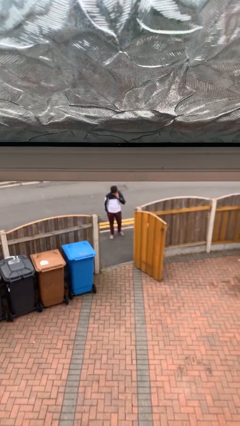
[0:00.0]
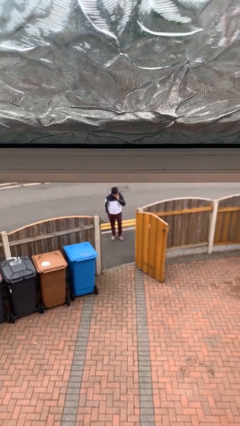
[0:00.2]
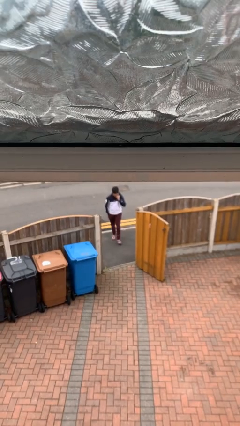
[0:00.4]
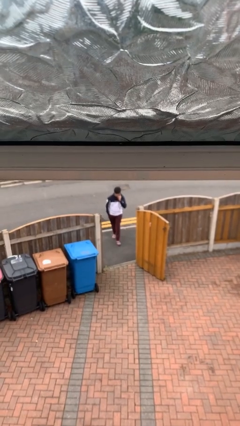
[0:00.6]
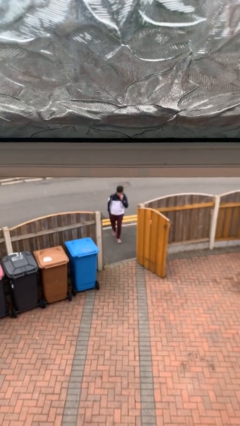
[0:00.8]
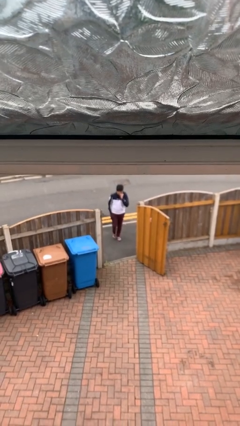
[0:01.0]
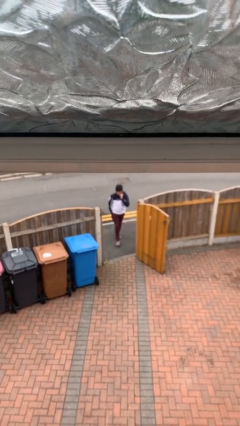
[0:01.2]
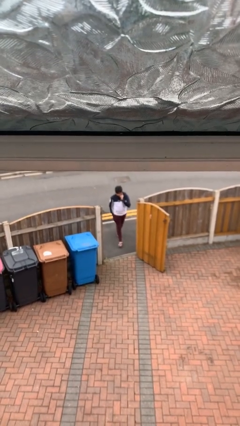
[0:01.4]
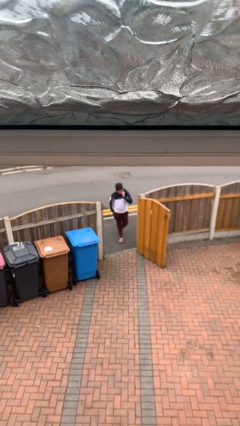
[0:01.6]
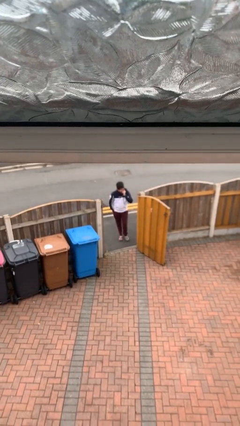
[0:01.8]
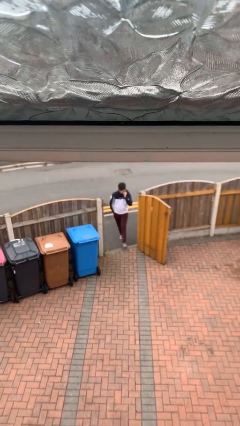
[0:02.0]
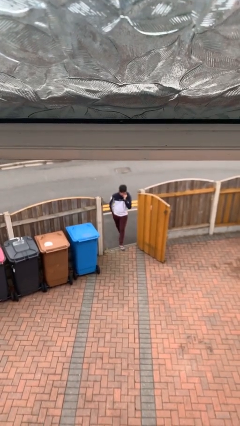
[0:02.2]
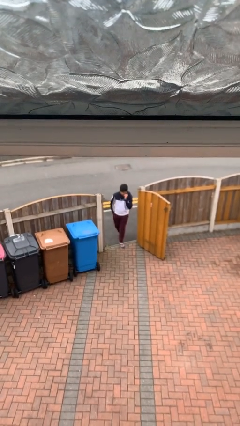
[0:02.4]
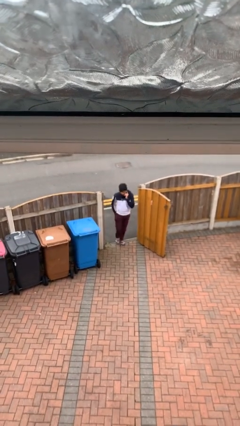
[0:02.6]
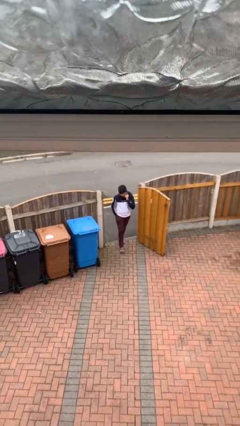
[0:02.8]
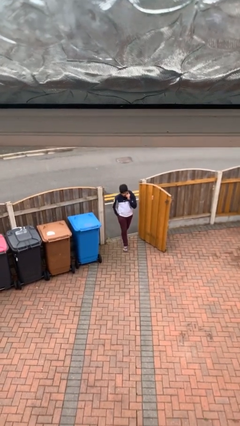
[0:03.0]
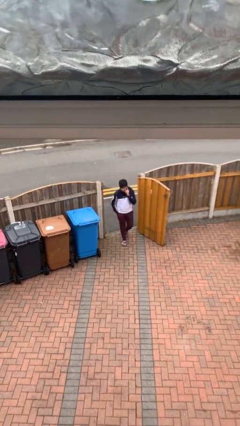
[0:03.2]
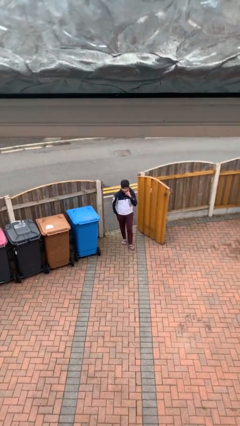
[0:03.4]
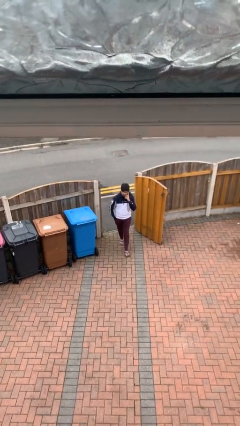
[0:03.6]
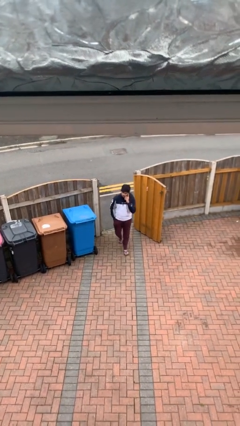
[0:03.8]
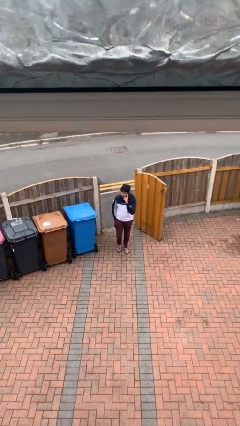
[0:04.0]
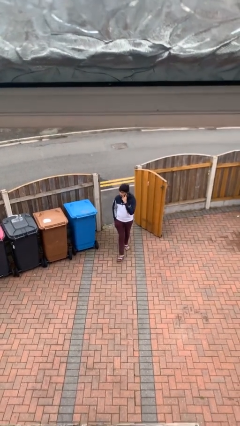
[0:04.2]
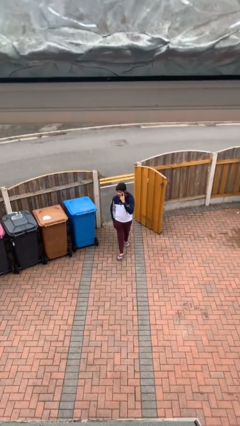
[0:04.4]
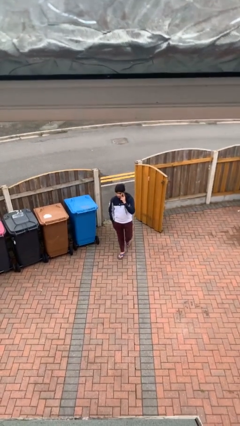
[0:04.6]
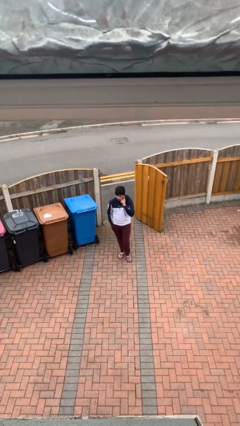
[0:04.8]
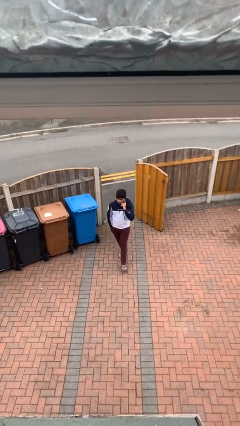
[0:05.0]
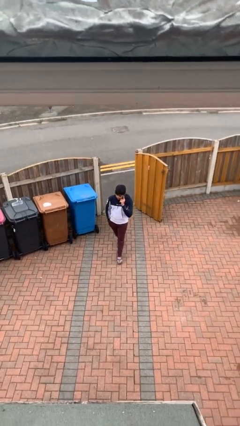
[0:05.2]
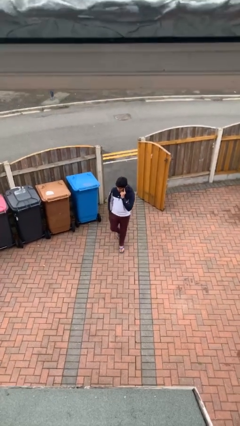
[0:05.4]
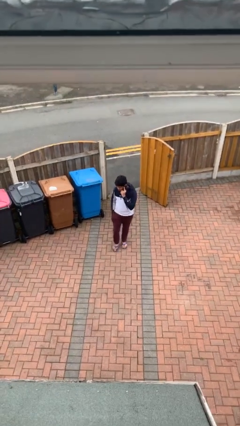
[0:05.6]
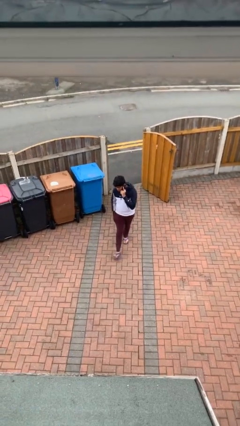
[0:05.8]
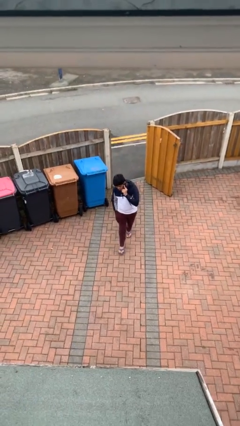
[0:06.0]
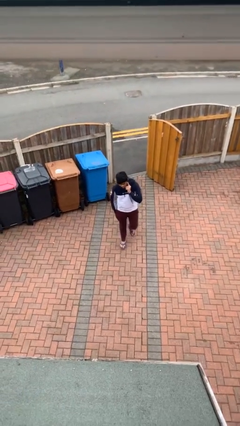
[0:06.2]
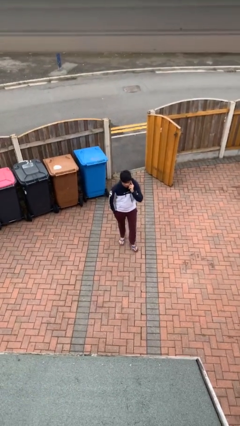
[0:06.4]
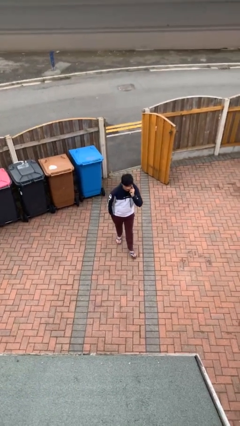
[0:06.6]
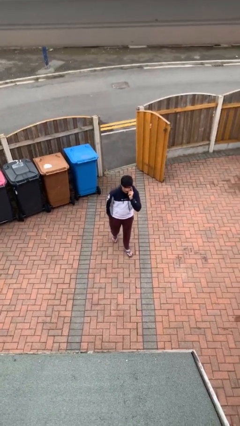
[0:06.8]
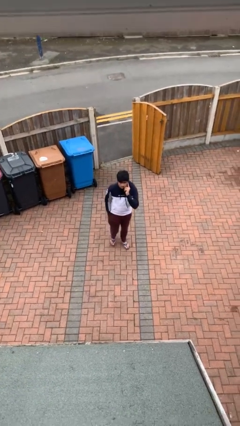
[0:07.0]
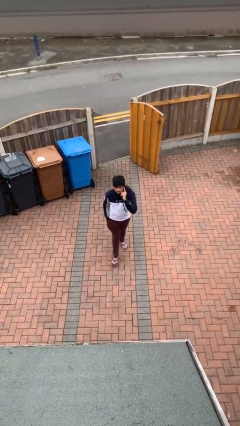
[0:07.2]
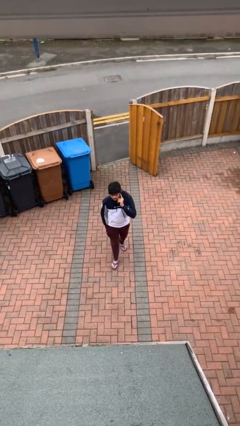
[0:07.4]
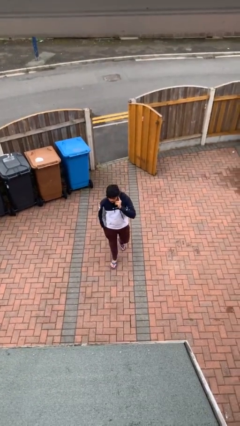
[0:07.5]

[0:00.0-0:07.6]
person enters scene through structure

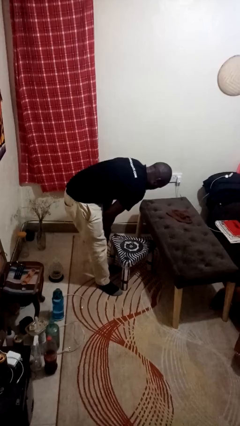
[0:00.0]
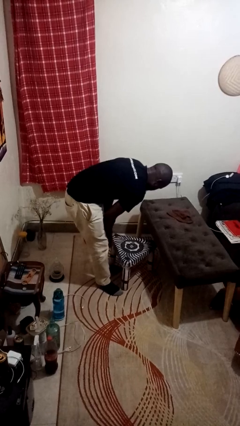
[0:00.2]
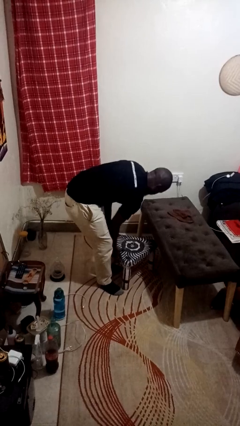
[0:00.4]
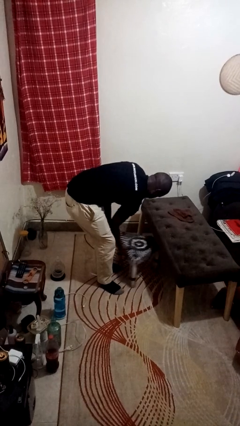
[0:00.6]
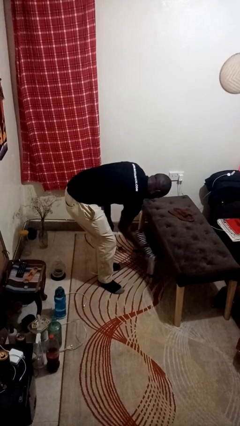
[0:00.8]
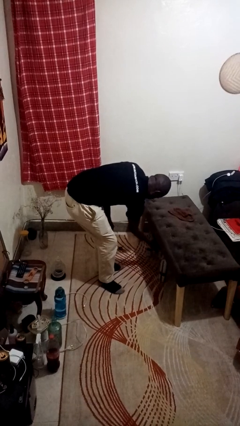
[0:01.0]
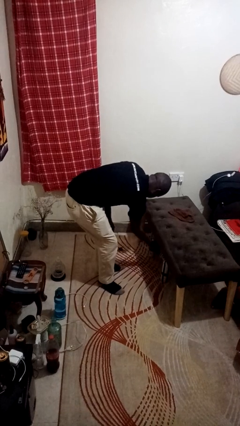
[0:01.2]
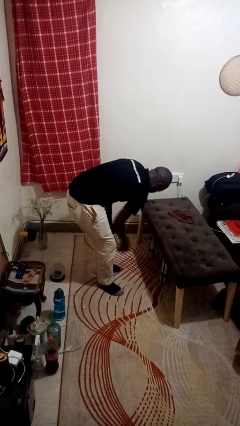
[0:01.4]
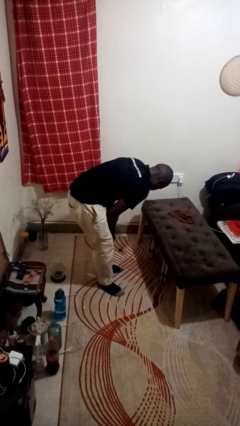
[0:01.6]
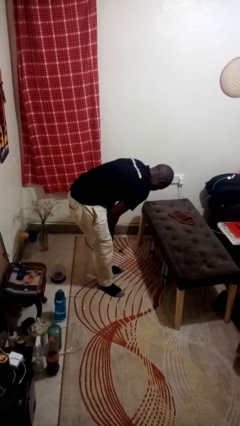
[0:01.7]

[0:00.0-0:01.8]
person pushes in chair

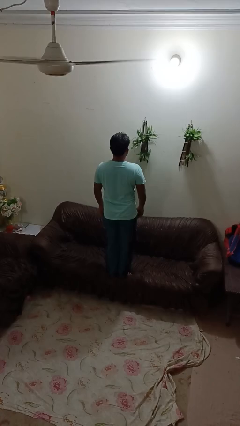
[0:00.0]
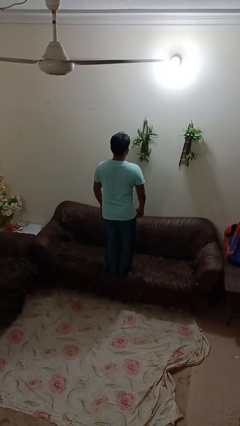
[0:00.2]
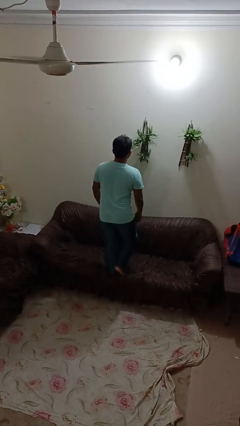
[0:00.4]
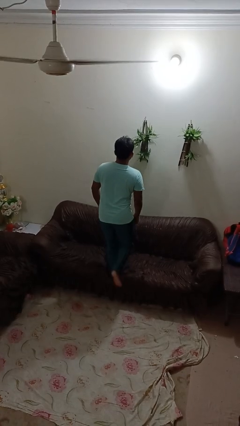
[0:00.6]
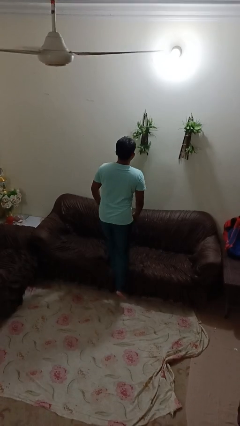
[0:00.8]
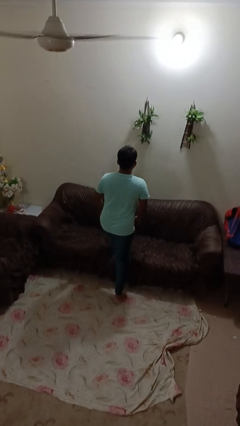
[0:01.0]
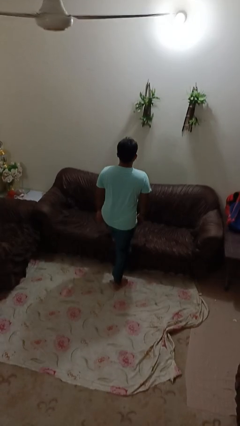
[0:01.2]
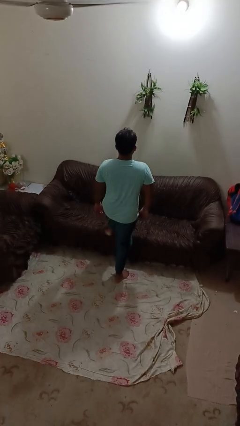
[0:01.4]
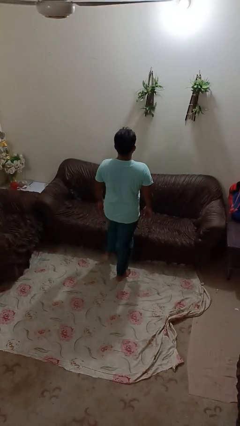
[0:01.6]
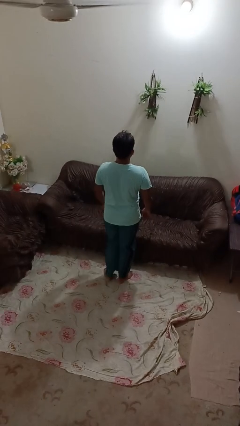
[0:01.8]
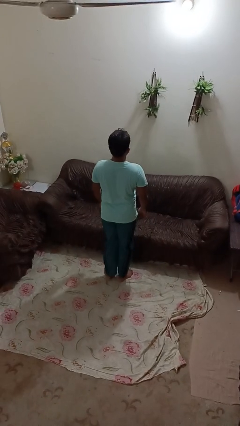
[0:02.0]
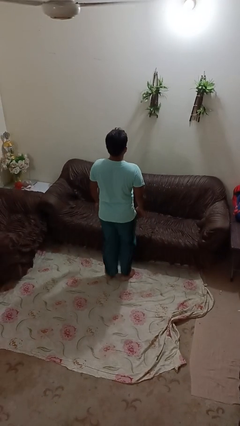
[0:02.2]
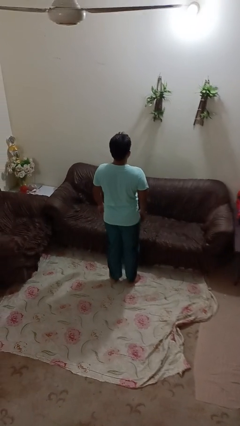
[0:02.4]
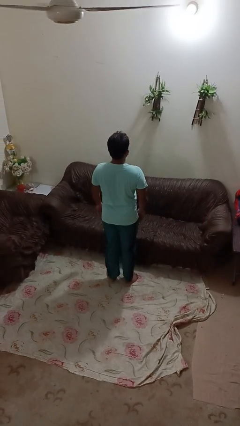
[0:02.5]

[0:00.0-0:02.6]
person climbs off couch

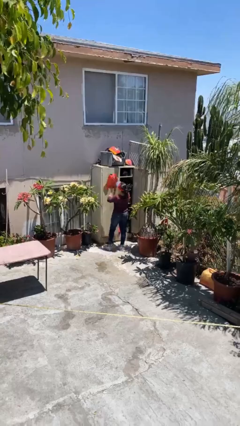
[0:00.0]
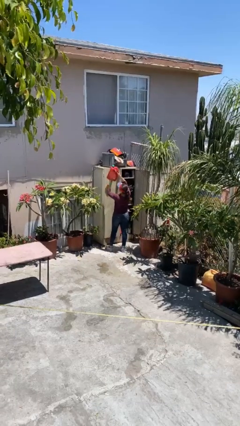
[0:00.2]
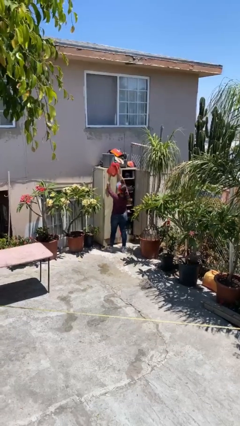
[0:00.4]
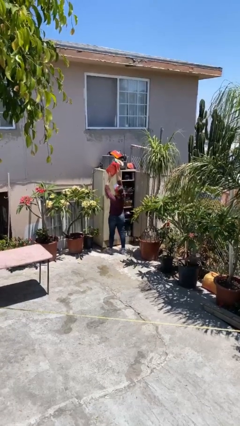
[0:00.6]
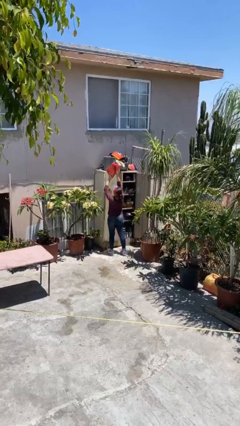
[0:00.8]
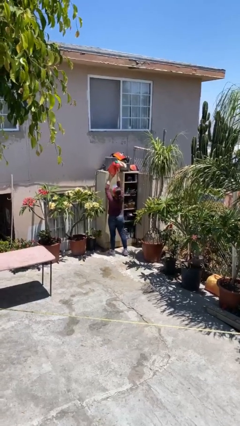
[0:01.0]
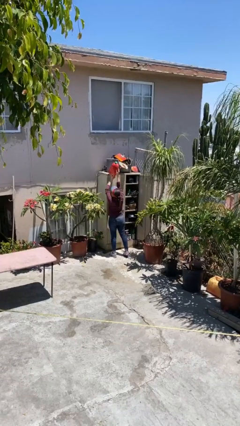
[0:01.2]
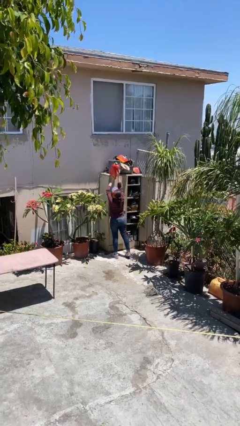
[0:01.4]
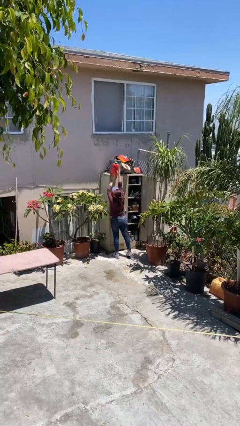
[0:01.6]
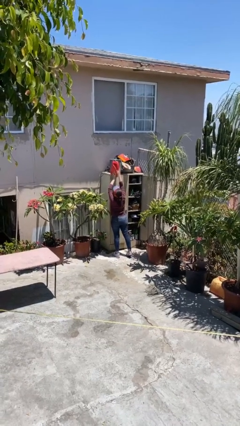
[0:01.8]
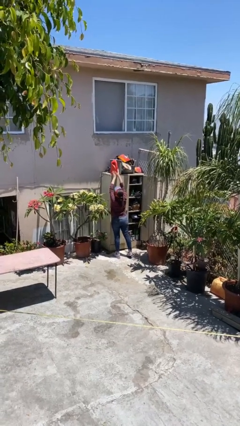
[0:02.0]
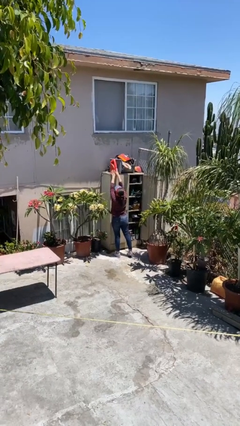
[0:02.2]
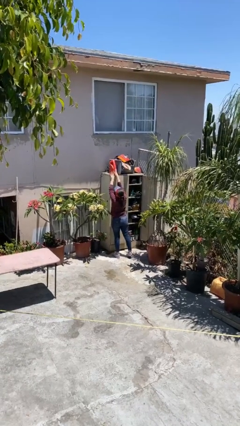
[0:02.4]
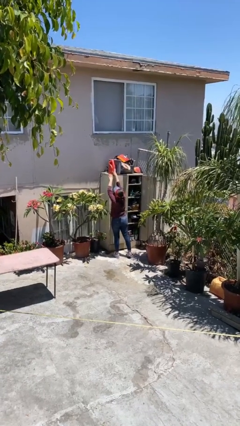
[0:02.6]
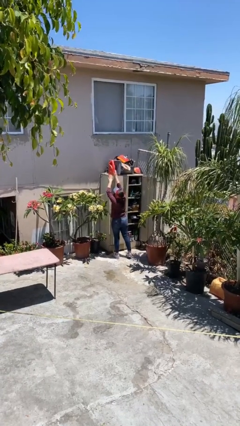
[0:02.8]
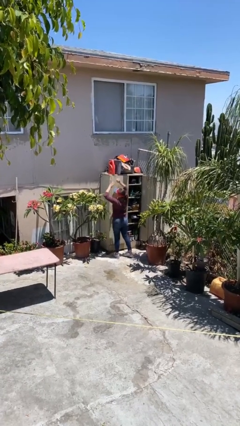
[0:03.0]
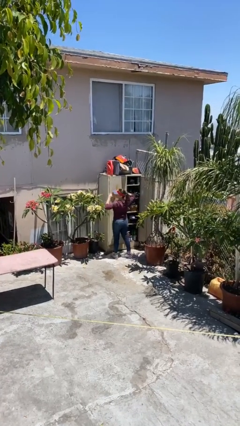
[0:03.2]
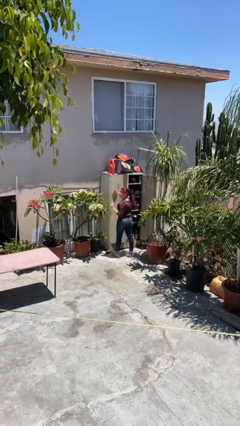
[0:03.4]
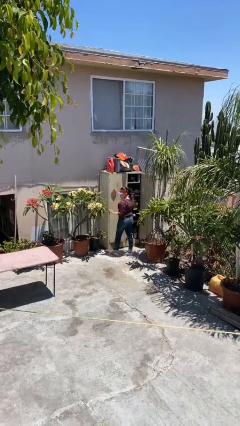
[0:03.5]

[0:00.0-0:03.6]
person puts down object on shelf

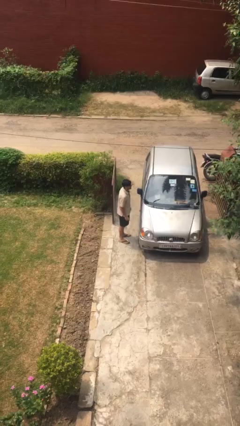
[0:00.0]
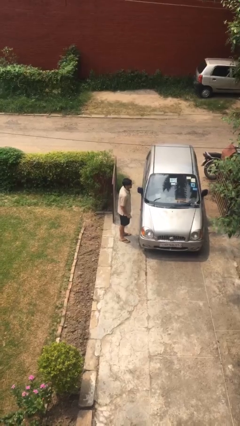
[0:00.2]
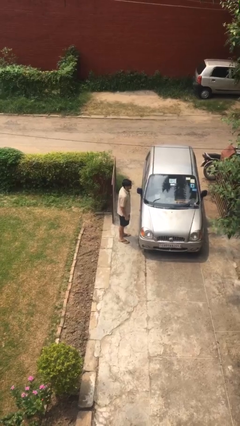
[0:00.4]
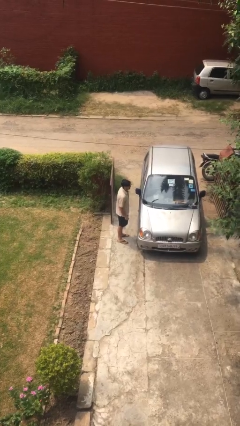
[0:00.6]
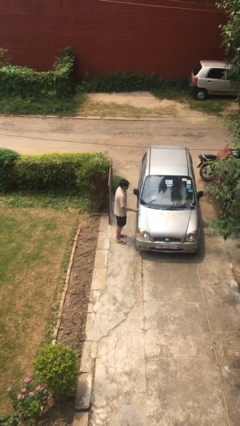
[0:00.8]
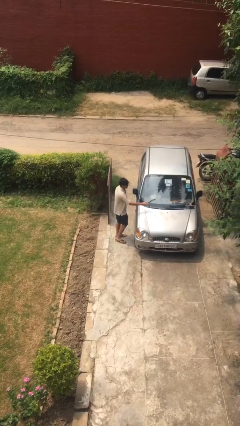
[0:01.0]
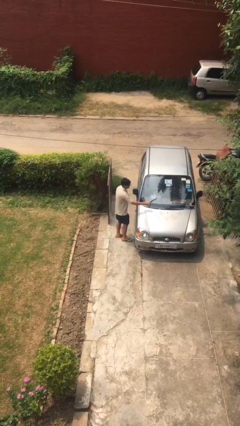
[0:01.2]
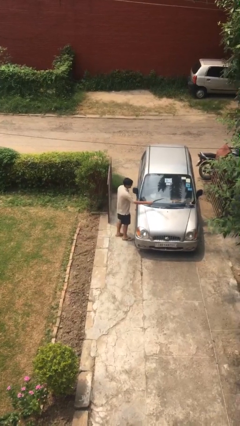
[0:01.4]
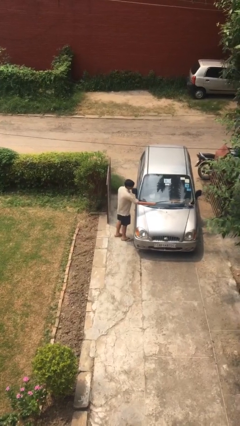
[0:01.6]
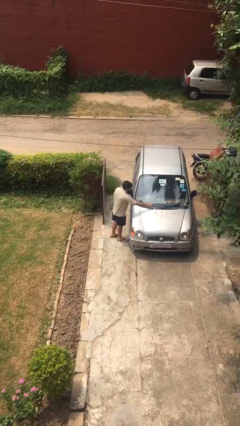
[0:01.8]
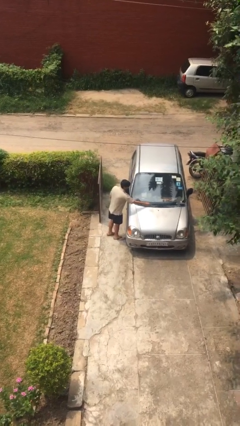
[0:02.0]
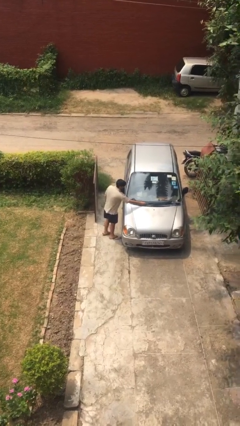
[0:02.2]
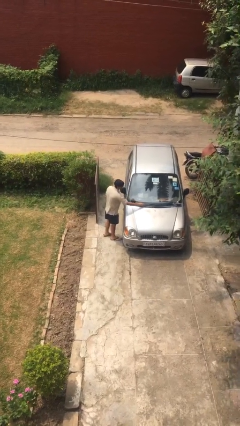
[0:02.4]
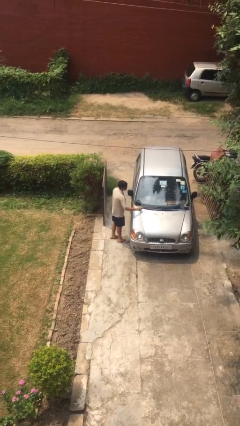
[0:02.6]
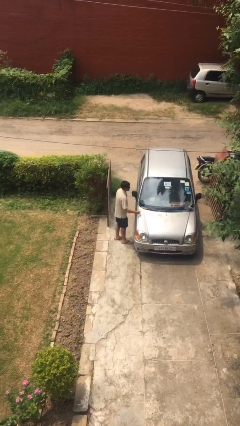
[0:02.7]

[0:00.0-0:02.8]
person flips down car wipers
